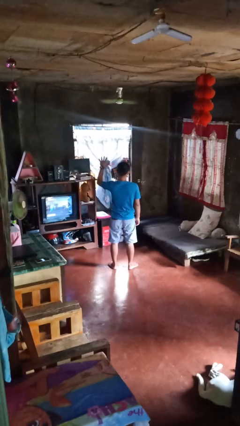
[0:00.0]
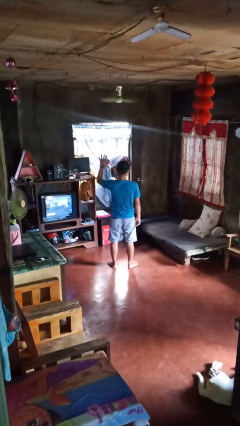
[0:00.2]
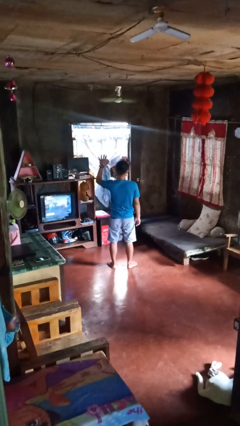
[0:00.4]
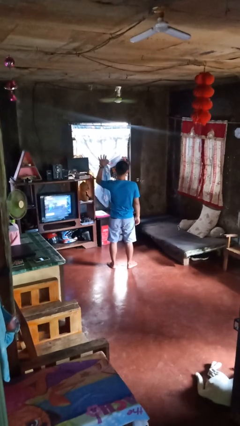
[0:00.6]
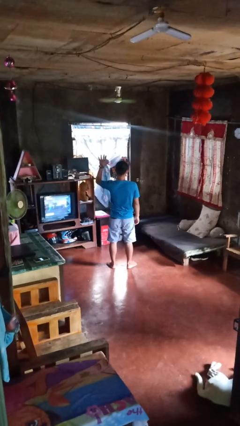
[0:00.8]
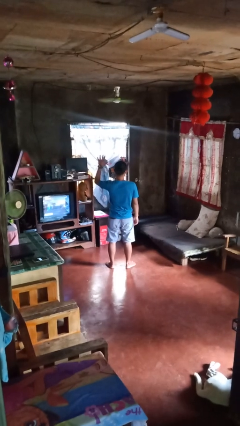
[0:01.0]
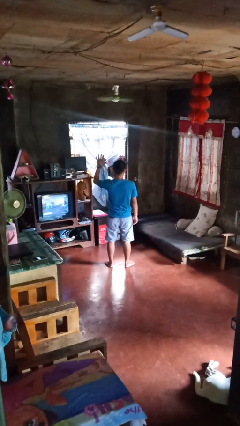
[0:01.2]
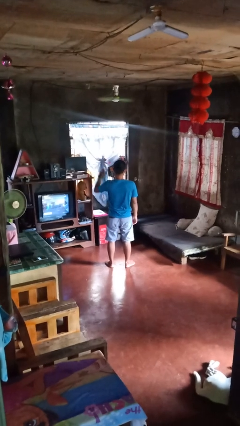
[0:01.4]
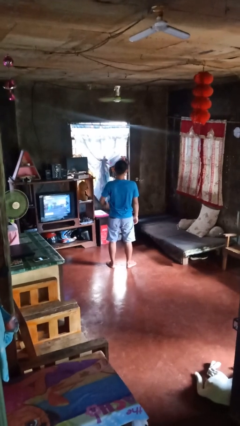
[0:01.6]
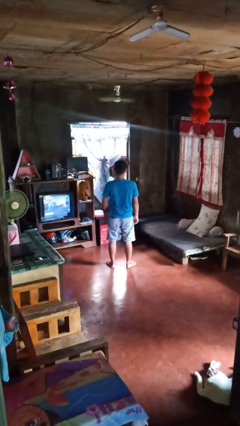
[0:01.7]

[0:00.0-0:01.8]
person gestures number five

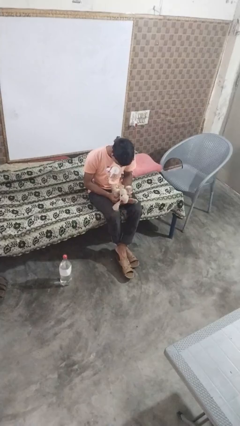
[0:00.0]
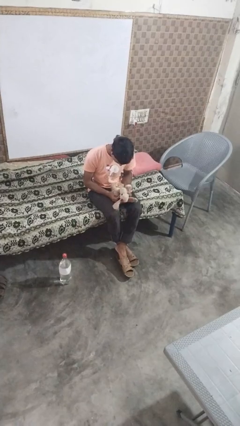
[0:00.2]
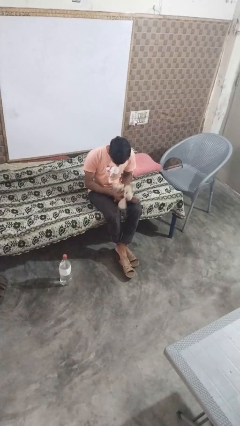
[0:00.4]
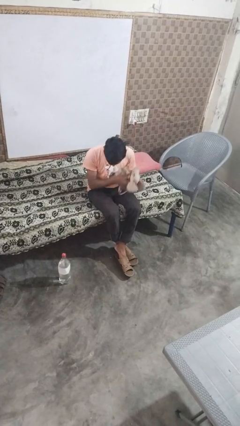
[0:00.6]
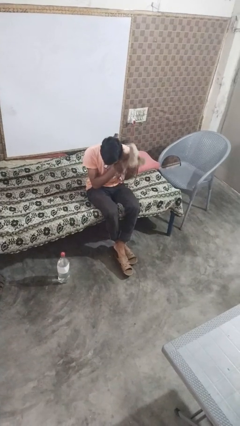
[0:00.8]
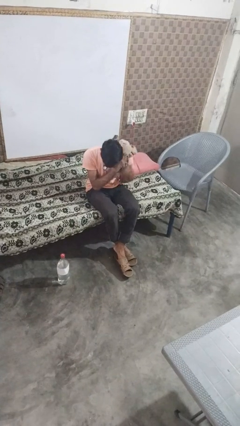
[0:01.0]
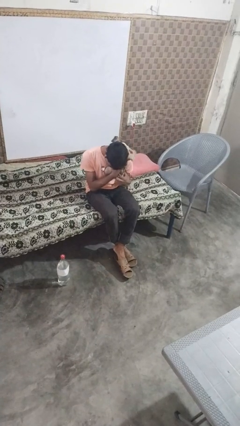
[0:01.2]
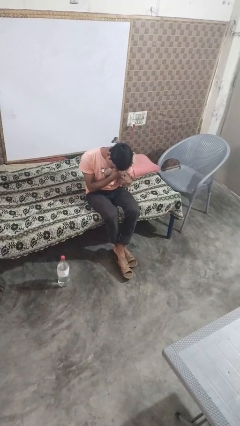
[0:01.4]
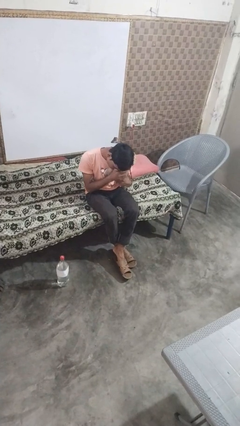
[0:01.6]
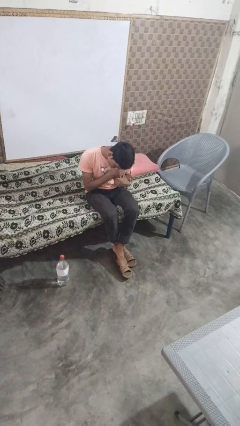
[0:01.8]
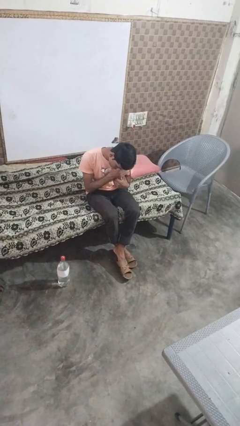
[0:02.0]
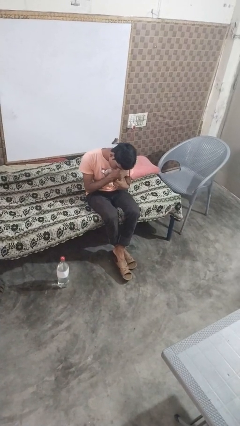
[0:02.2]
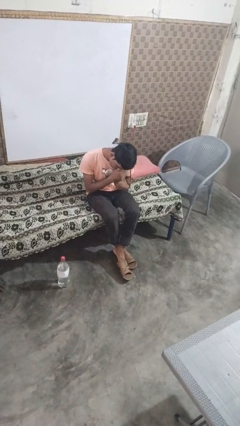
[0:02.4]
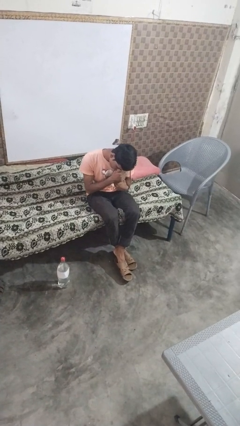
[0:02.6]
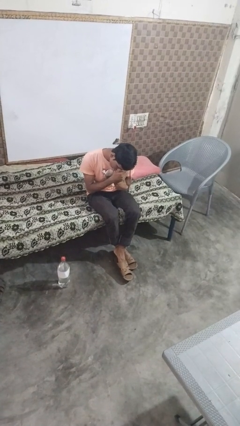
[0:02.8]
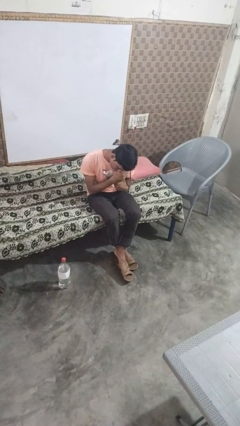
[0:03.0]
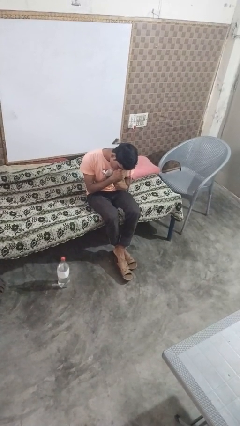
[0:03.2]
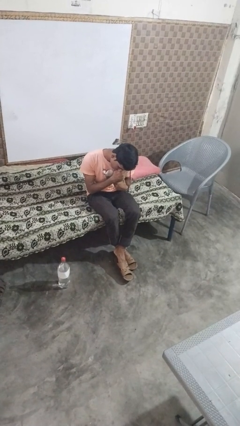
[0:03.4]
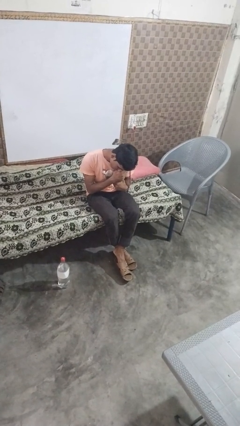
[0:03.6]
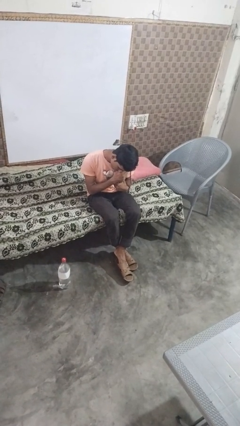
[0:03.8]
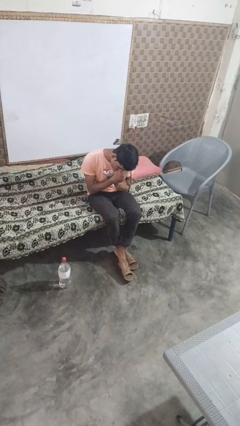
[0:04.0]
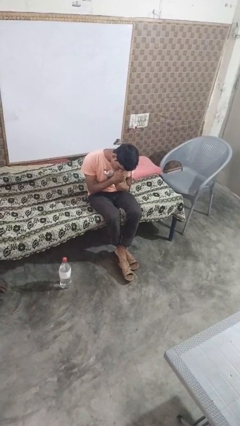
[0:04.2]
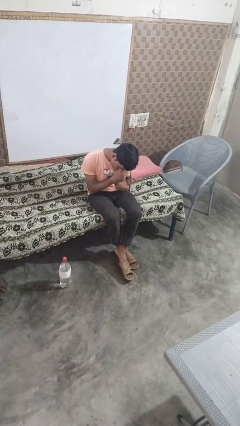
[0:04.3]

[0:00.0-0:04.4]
person hugs stuffed animal

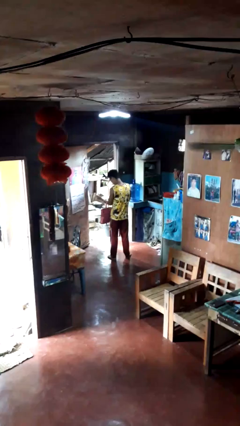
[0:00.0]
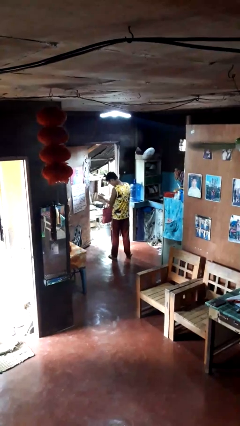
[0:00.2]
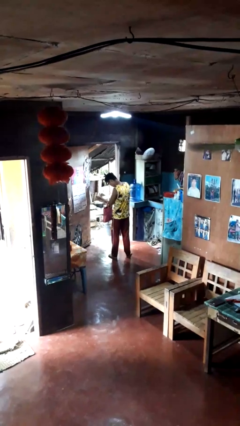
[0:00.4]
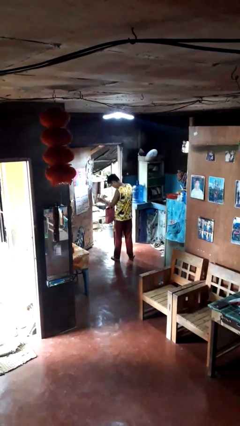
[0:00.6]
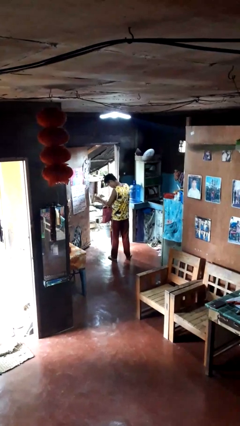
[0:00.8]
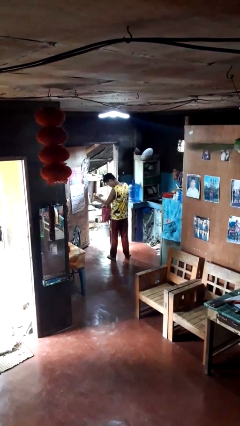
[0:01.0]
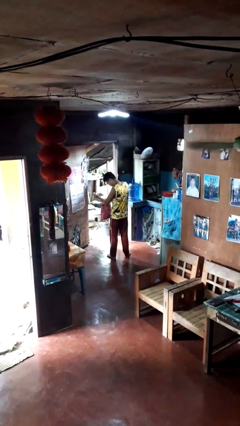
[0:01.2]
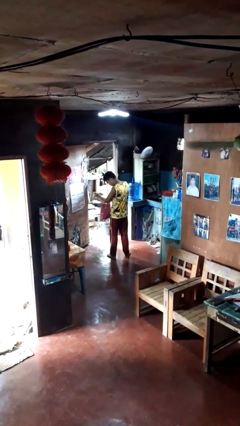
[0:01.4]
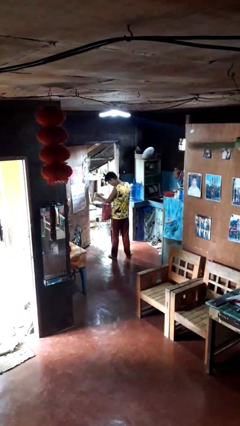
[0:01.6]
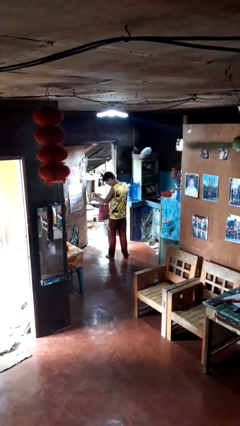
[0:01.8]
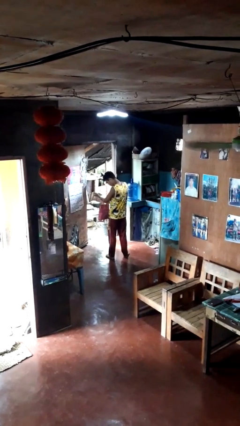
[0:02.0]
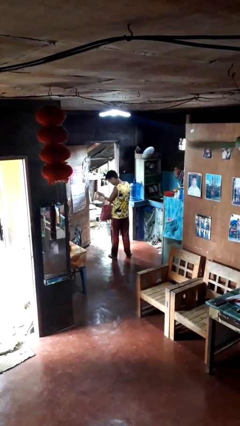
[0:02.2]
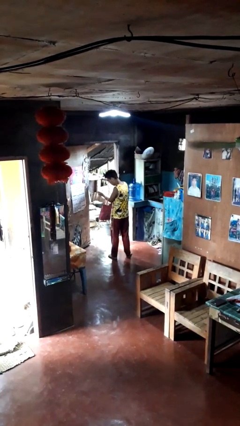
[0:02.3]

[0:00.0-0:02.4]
person searches in purse

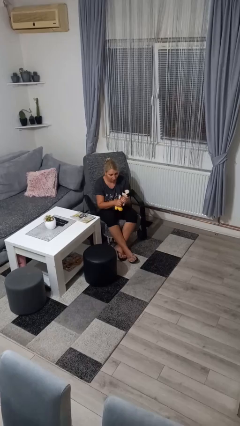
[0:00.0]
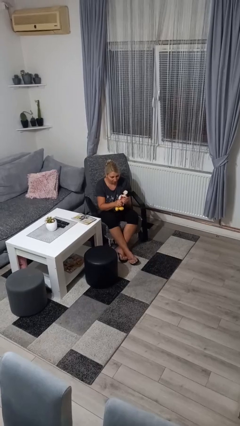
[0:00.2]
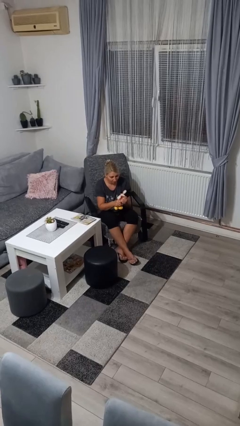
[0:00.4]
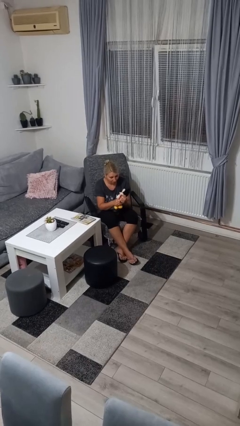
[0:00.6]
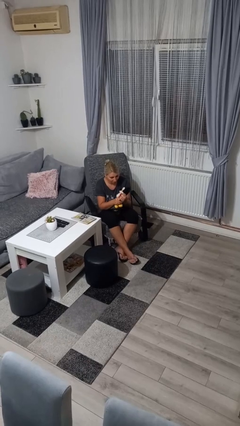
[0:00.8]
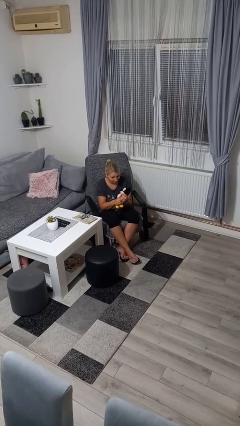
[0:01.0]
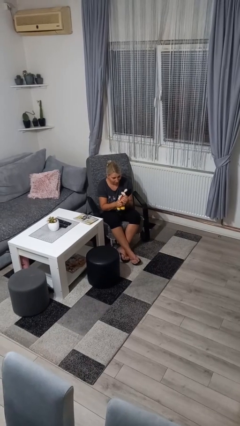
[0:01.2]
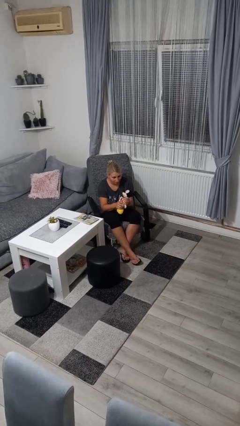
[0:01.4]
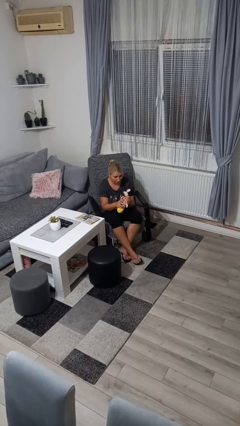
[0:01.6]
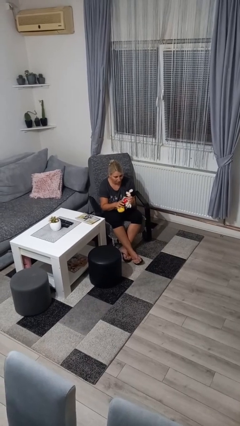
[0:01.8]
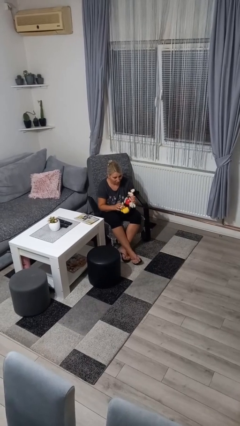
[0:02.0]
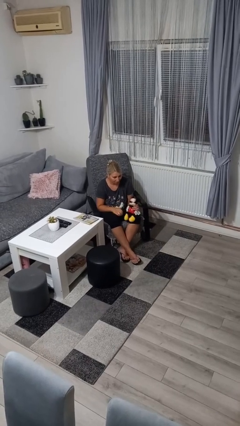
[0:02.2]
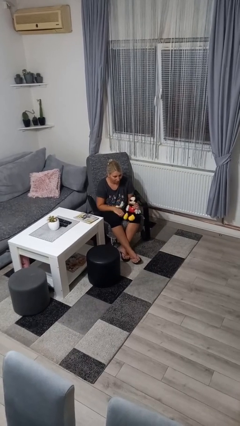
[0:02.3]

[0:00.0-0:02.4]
person squeezes object

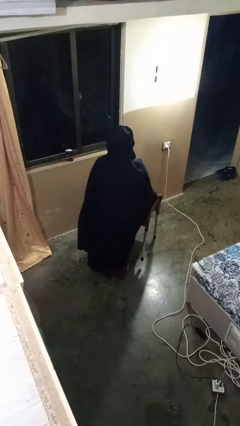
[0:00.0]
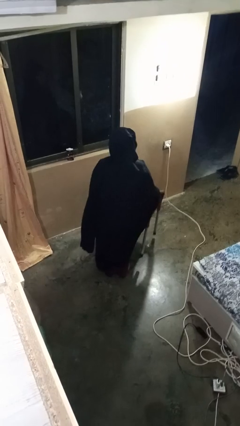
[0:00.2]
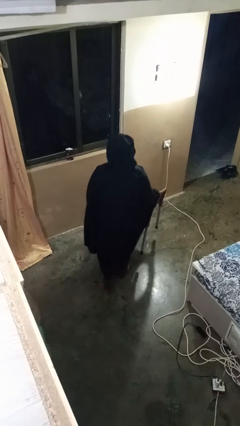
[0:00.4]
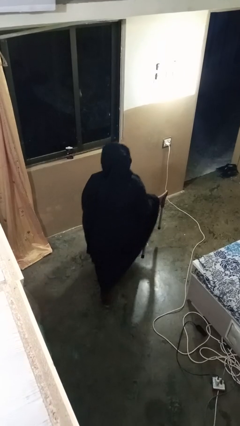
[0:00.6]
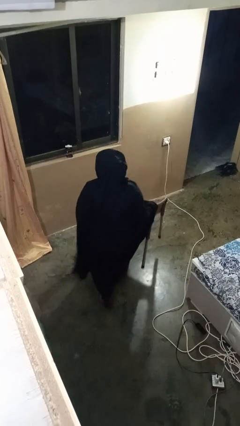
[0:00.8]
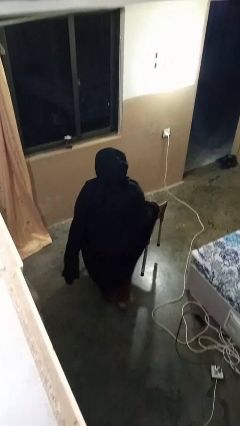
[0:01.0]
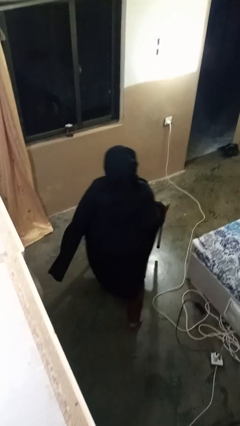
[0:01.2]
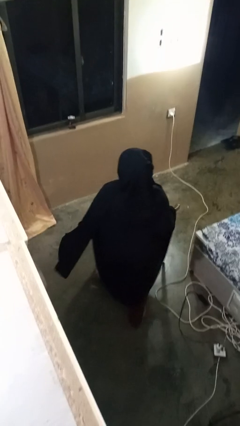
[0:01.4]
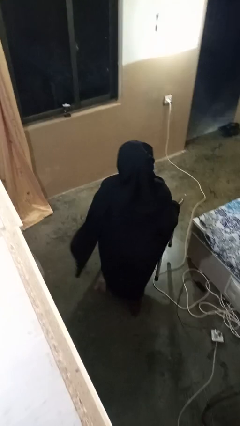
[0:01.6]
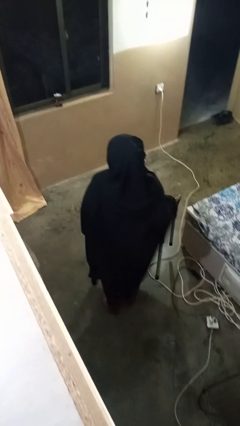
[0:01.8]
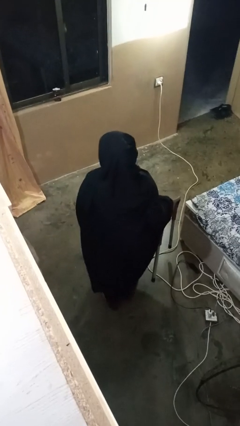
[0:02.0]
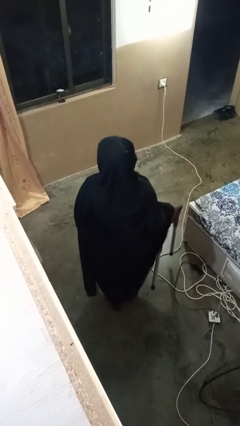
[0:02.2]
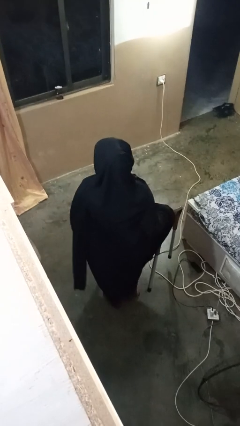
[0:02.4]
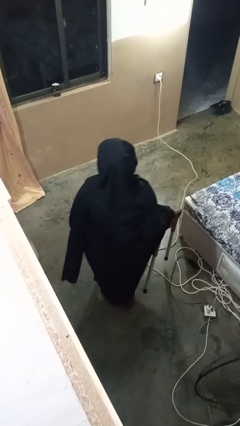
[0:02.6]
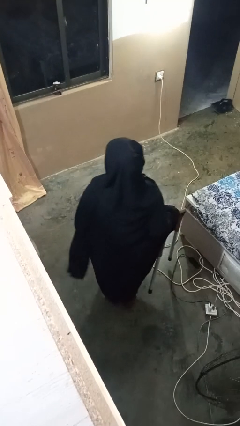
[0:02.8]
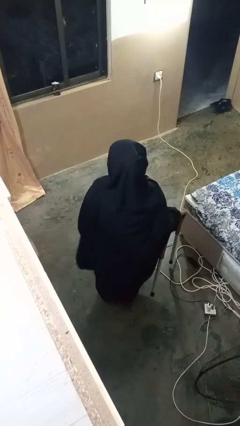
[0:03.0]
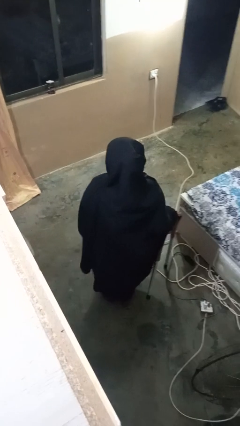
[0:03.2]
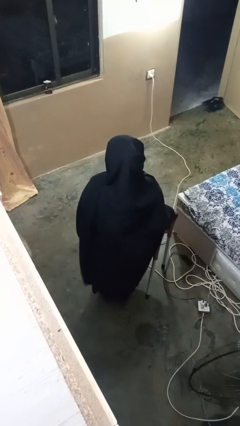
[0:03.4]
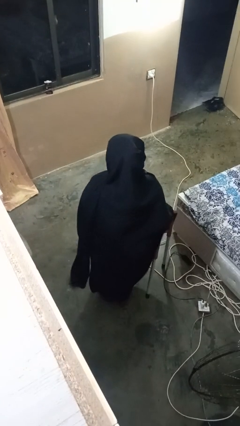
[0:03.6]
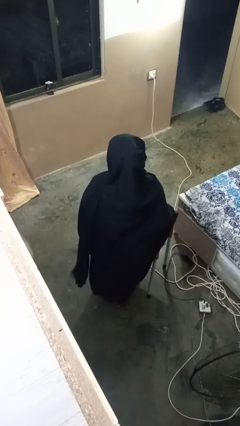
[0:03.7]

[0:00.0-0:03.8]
person carries furniture

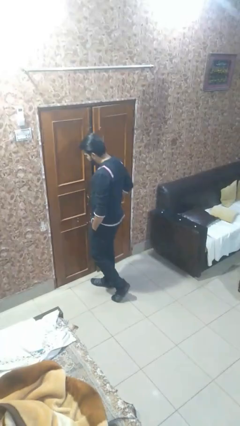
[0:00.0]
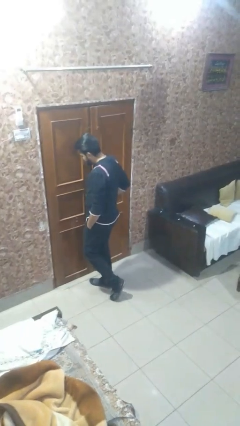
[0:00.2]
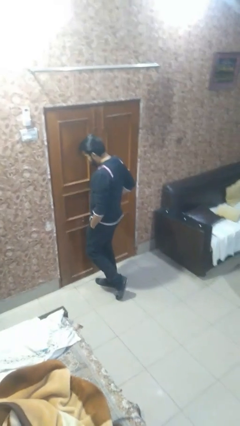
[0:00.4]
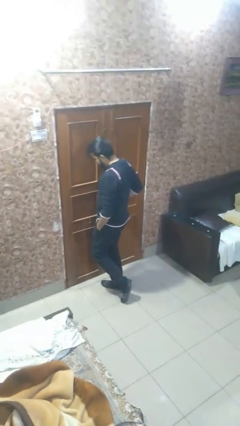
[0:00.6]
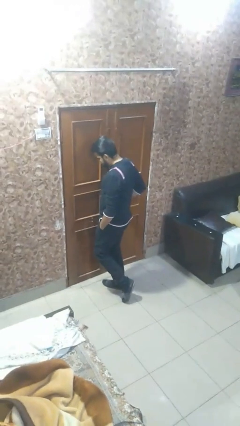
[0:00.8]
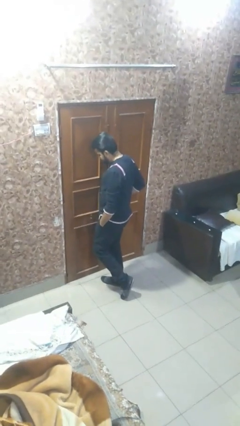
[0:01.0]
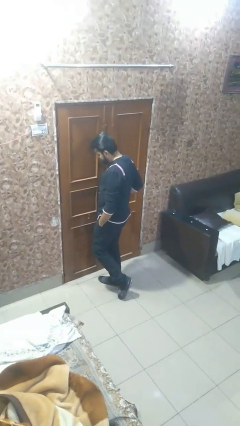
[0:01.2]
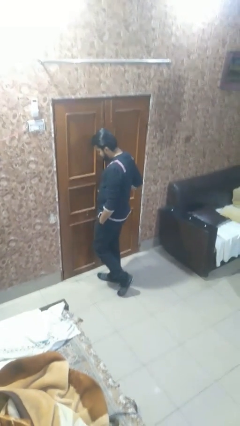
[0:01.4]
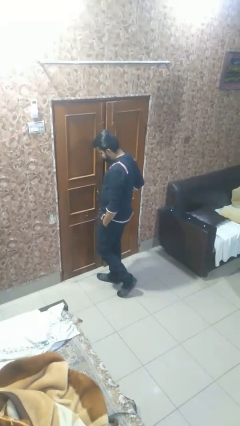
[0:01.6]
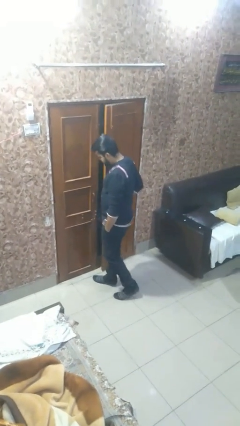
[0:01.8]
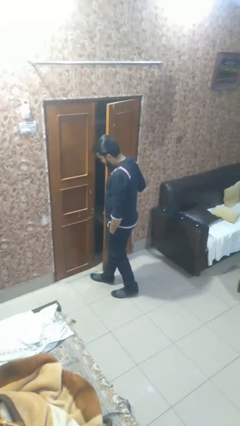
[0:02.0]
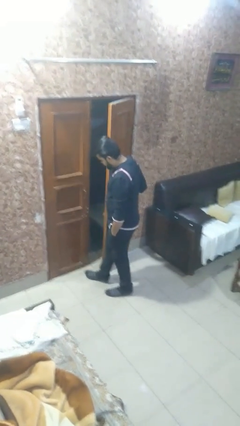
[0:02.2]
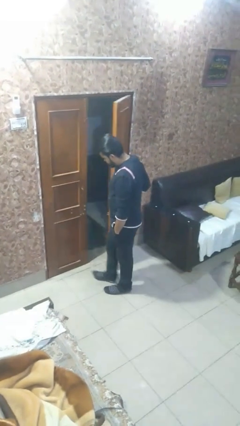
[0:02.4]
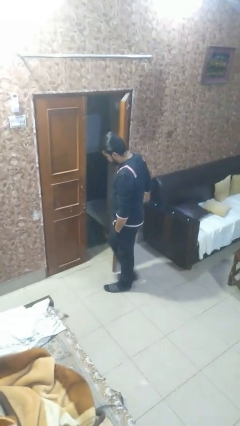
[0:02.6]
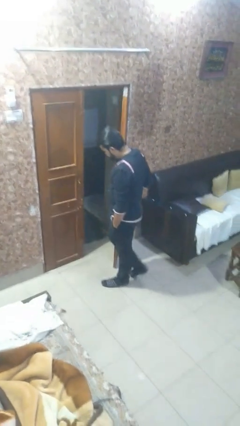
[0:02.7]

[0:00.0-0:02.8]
person closes facility door
